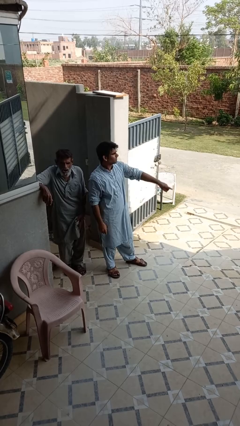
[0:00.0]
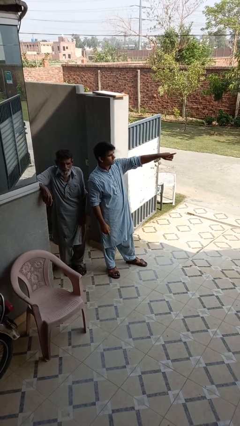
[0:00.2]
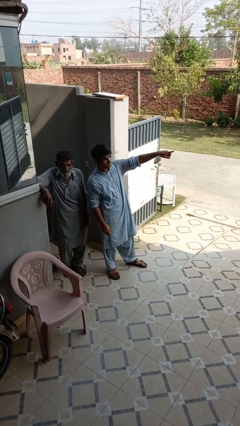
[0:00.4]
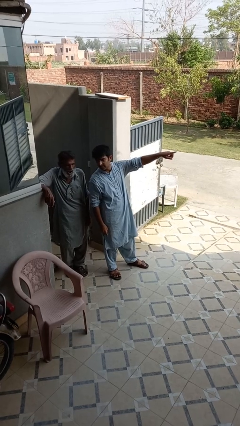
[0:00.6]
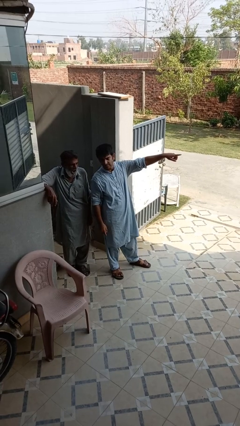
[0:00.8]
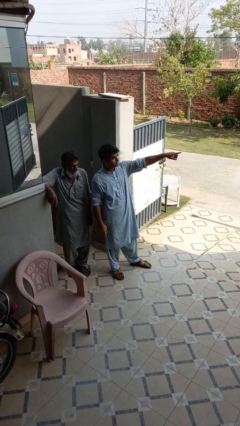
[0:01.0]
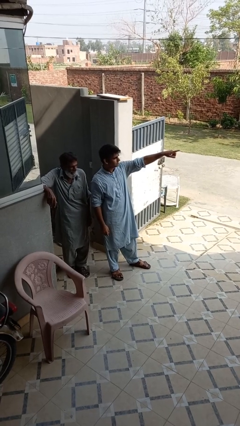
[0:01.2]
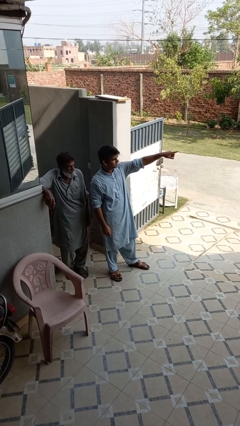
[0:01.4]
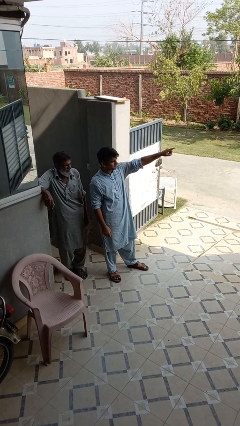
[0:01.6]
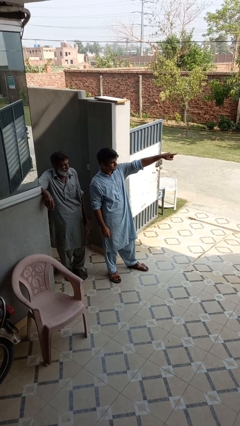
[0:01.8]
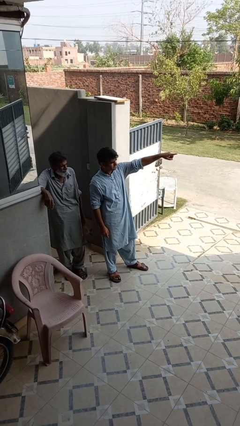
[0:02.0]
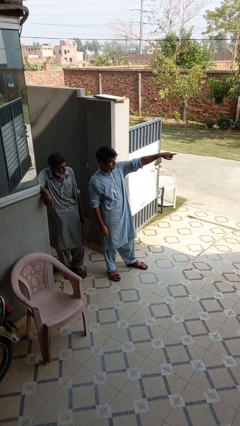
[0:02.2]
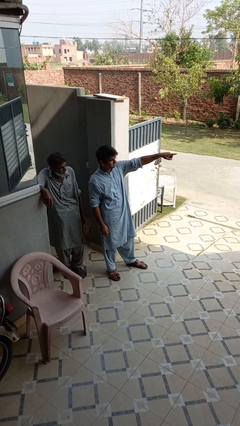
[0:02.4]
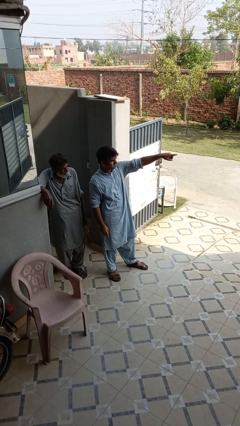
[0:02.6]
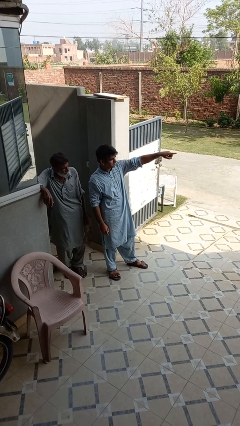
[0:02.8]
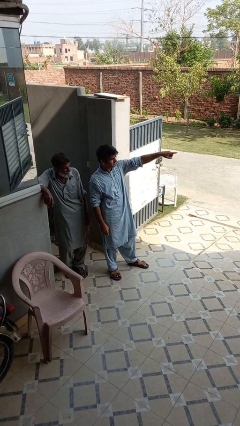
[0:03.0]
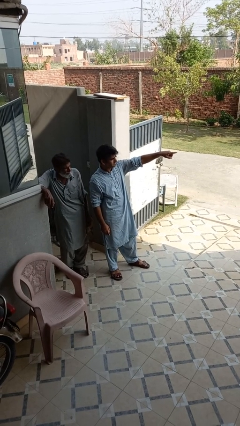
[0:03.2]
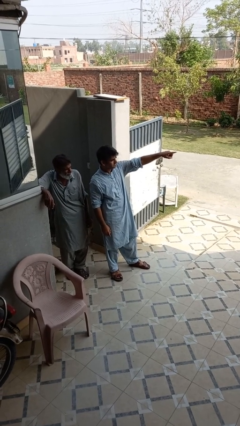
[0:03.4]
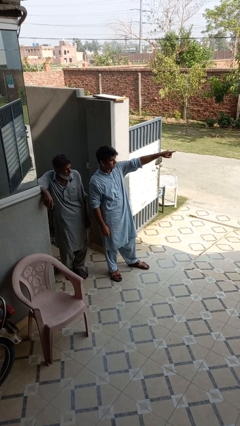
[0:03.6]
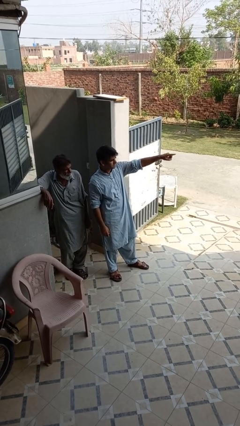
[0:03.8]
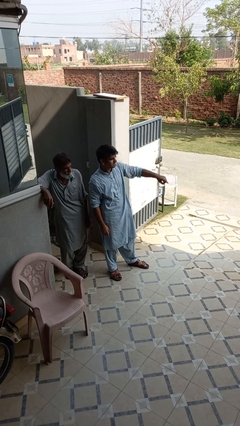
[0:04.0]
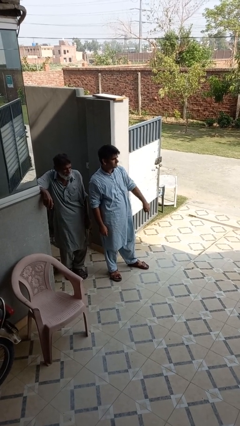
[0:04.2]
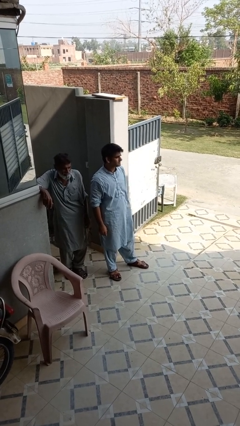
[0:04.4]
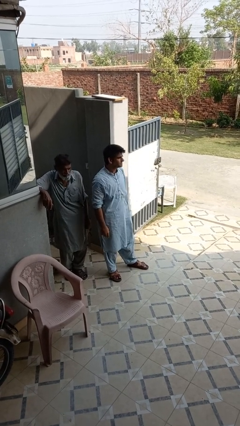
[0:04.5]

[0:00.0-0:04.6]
person points at person

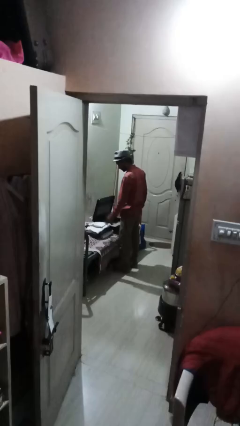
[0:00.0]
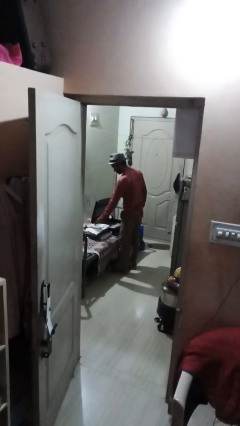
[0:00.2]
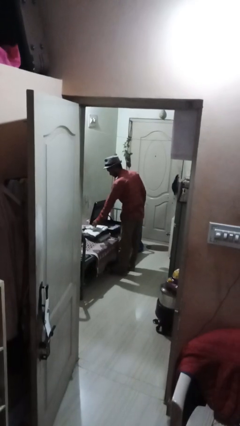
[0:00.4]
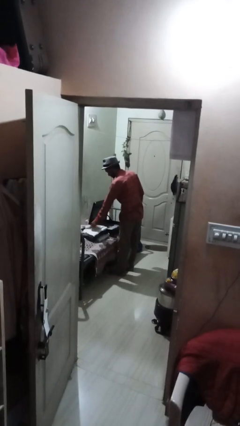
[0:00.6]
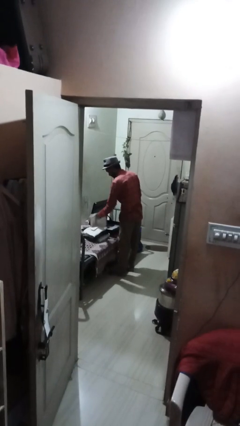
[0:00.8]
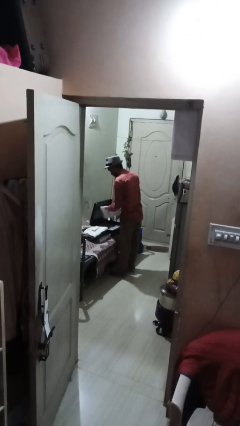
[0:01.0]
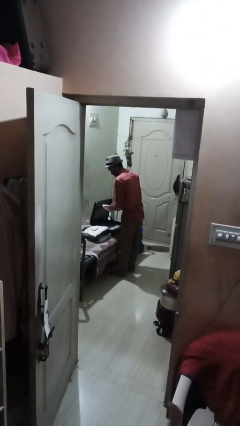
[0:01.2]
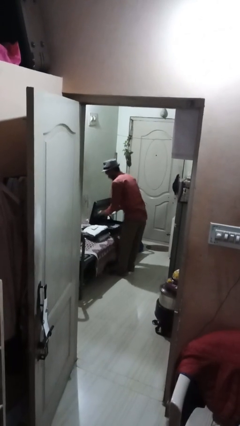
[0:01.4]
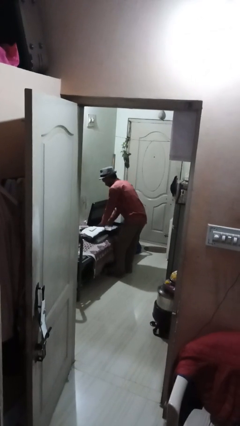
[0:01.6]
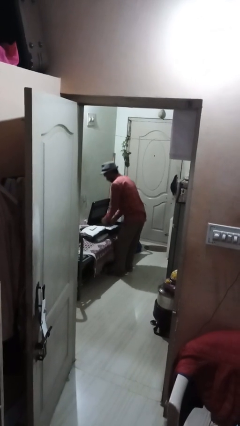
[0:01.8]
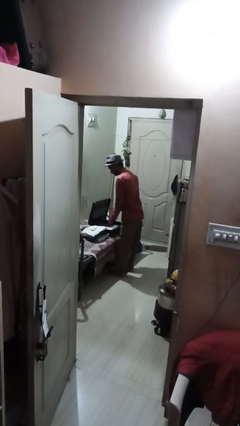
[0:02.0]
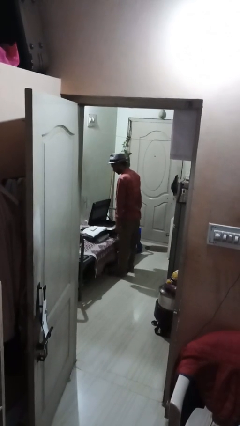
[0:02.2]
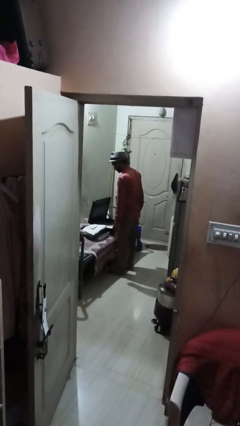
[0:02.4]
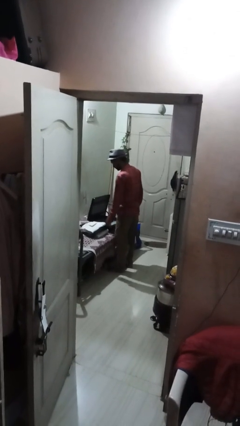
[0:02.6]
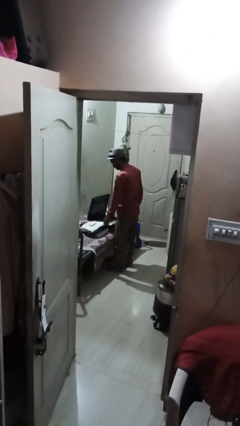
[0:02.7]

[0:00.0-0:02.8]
person loads clothes into suitcase

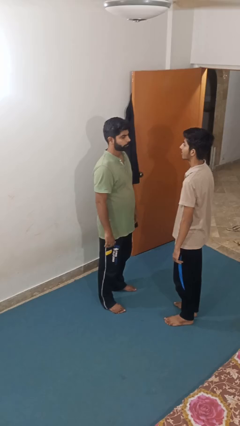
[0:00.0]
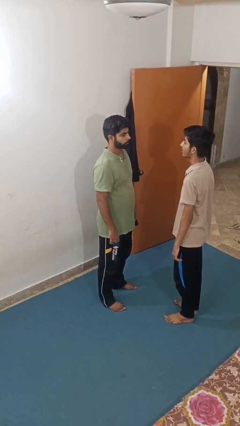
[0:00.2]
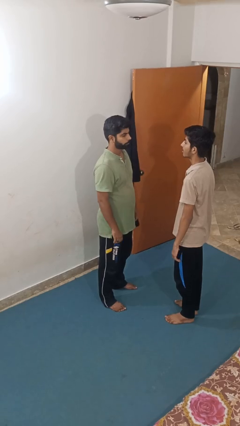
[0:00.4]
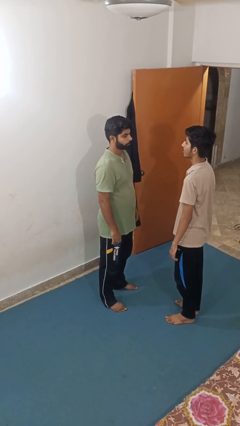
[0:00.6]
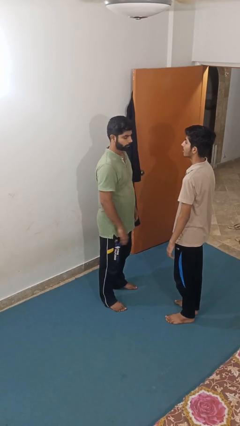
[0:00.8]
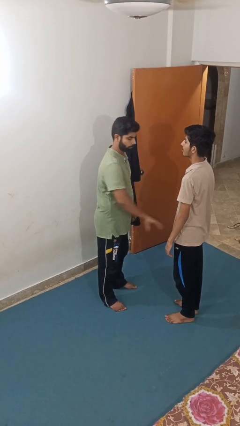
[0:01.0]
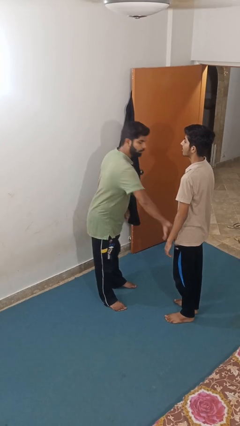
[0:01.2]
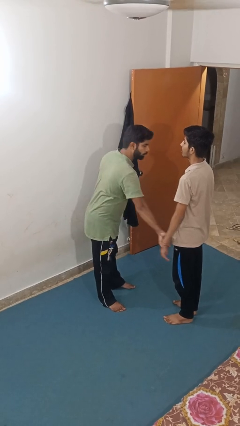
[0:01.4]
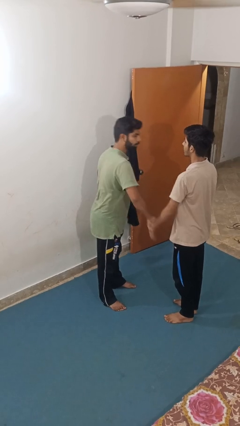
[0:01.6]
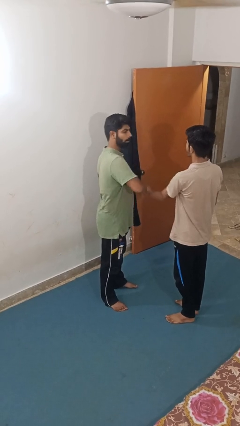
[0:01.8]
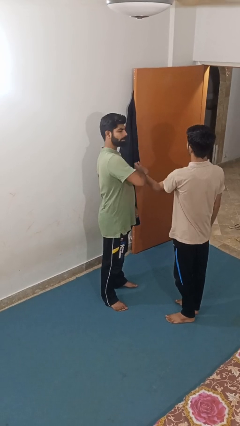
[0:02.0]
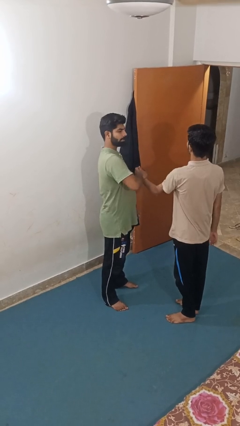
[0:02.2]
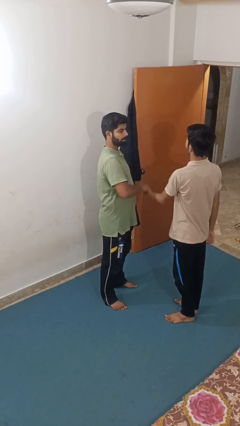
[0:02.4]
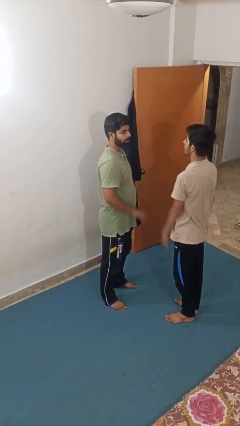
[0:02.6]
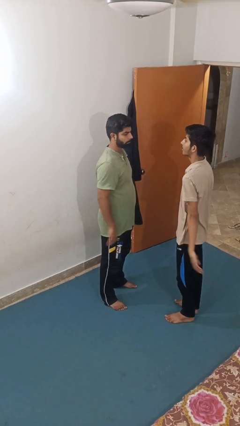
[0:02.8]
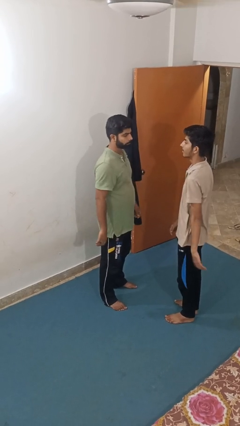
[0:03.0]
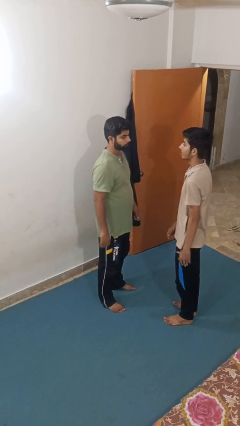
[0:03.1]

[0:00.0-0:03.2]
person grabs person by forearm

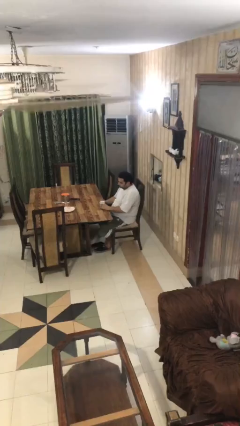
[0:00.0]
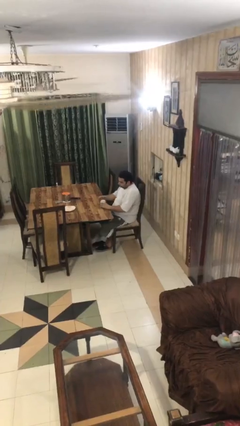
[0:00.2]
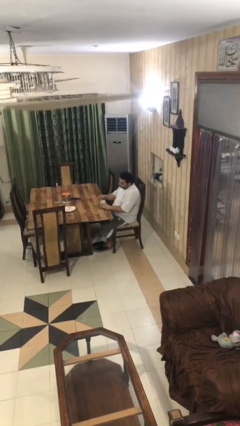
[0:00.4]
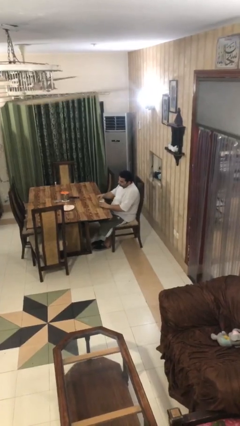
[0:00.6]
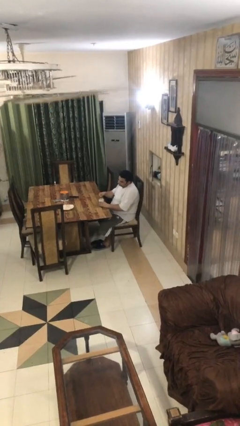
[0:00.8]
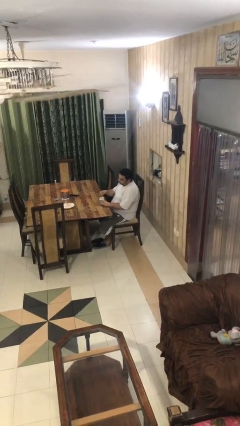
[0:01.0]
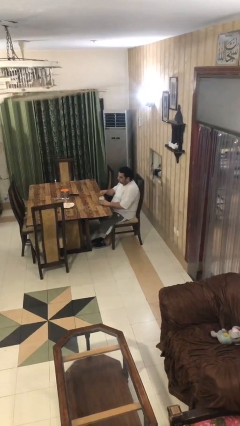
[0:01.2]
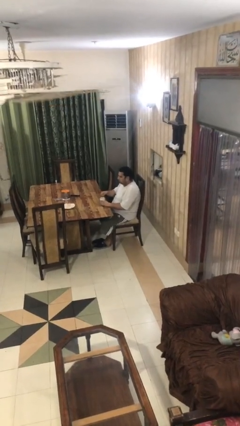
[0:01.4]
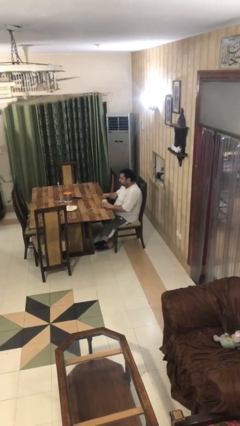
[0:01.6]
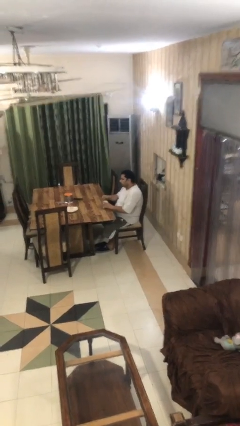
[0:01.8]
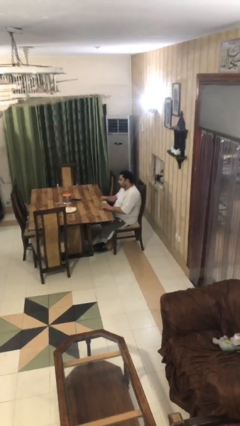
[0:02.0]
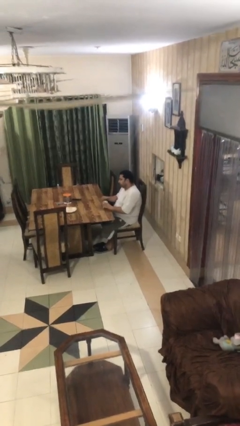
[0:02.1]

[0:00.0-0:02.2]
person stirs mug

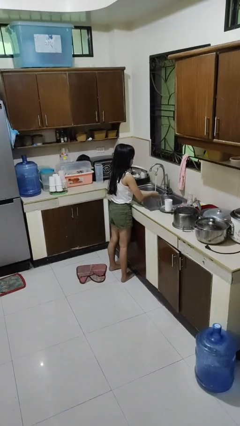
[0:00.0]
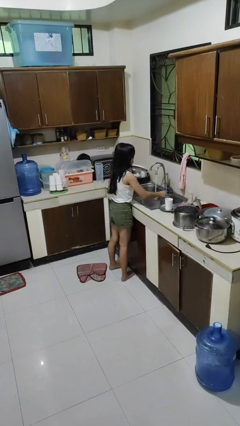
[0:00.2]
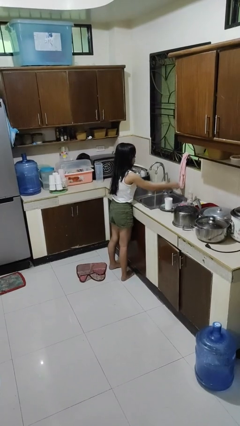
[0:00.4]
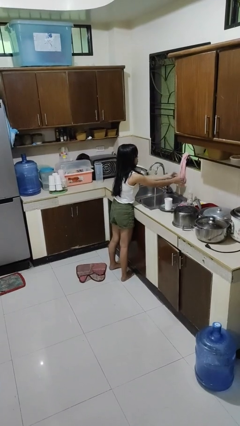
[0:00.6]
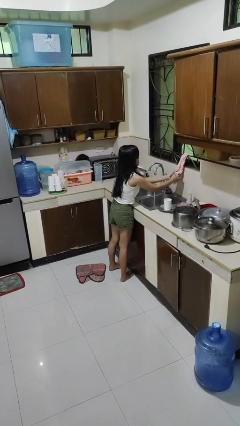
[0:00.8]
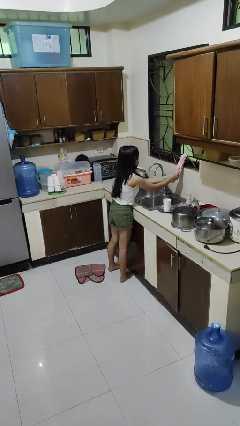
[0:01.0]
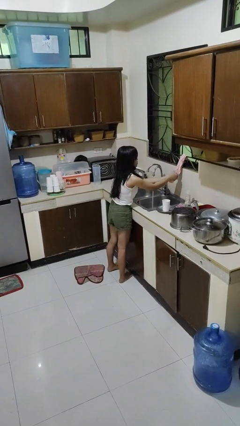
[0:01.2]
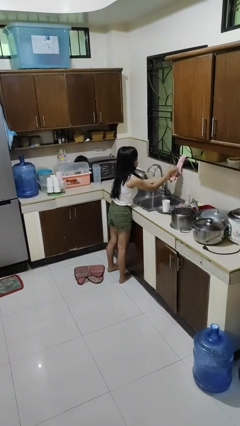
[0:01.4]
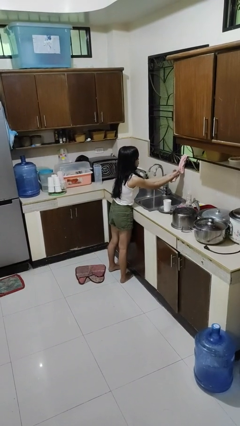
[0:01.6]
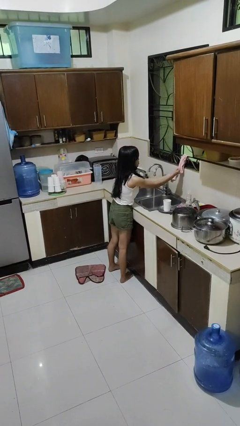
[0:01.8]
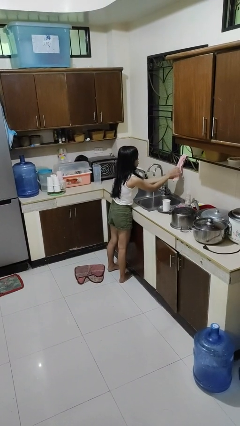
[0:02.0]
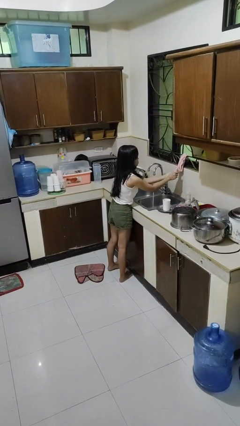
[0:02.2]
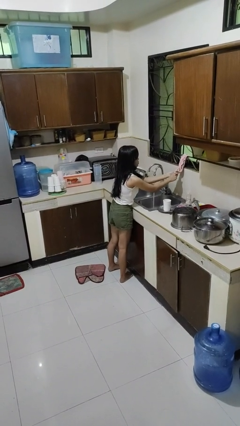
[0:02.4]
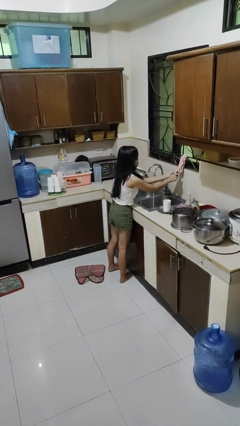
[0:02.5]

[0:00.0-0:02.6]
person dries hands with towel

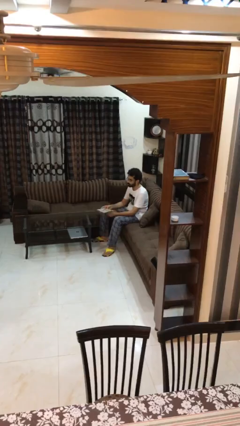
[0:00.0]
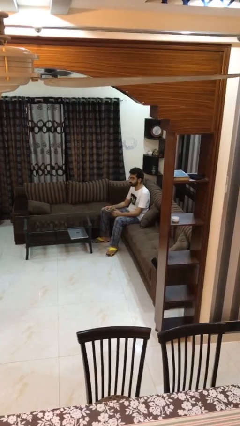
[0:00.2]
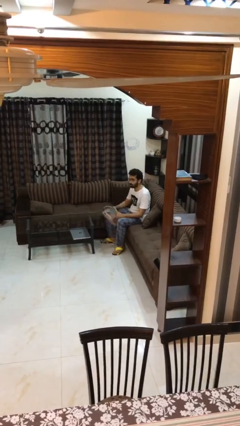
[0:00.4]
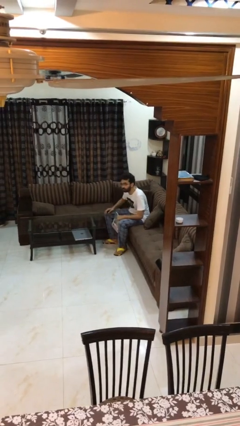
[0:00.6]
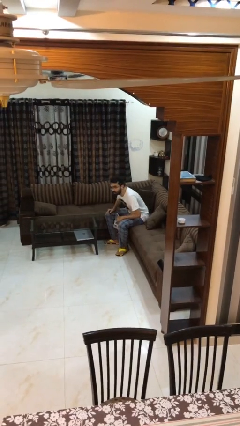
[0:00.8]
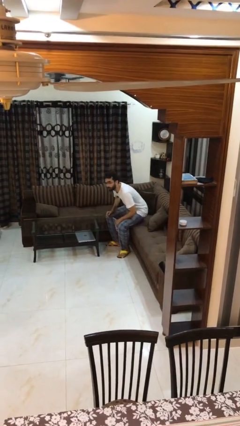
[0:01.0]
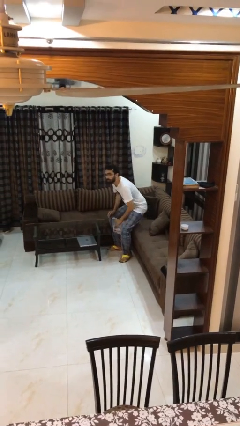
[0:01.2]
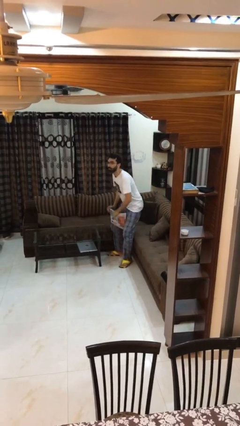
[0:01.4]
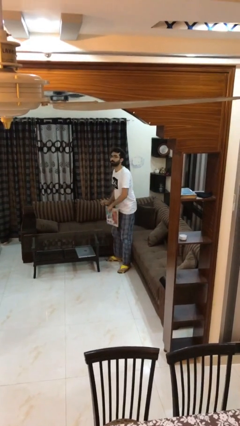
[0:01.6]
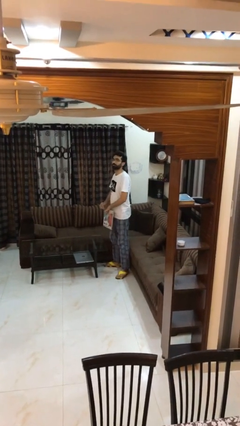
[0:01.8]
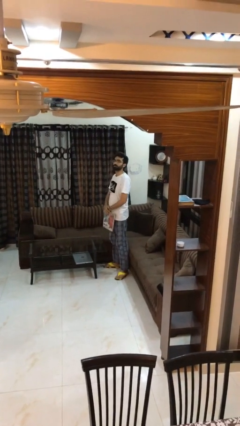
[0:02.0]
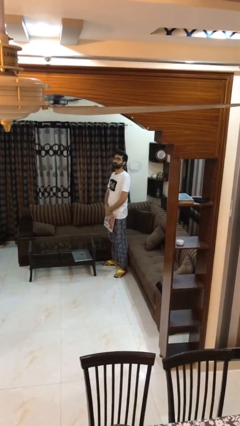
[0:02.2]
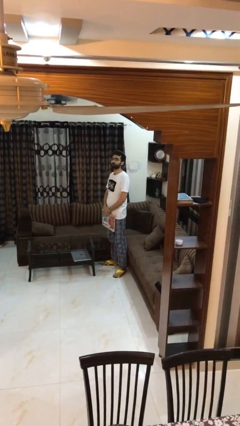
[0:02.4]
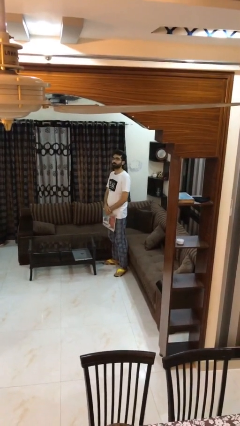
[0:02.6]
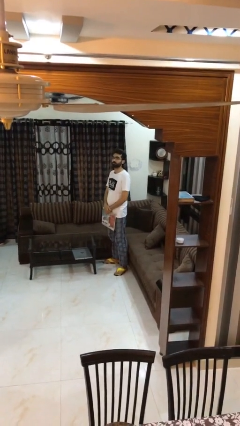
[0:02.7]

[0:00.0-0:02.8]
person stands up
